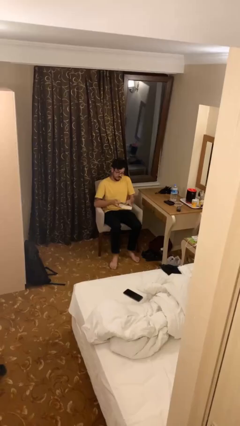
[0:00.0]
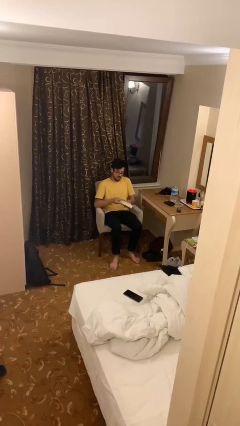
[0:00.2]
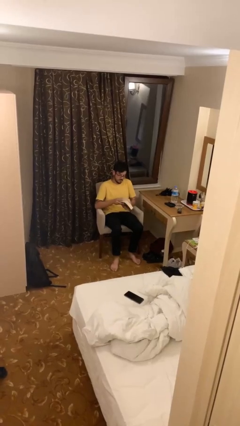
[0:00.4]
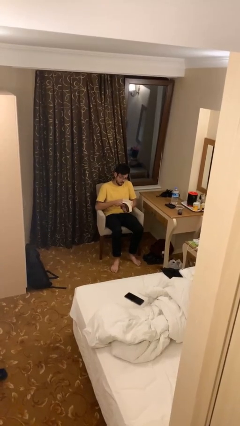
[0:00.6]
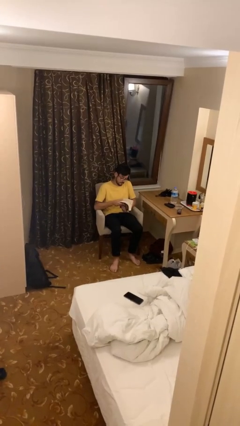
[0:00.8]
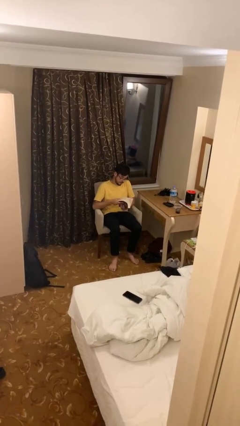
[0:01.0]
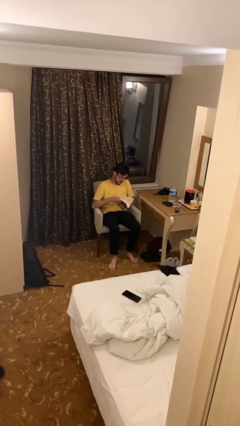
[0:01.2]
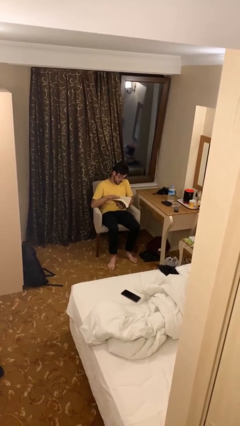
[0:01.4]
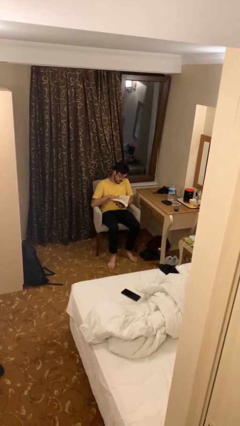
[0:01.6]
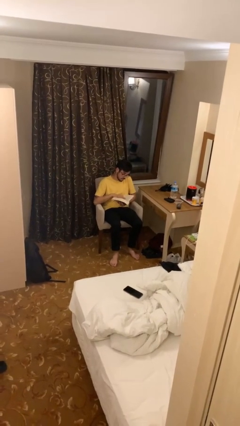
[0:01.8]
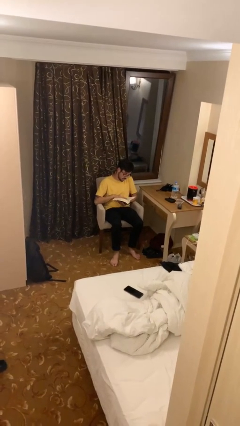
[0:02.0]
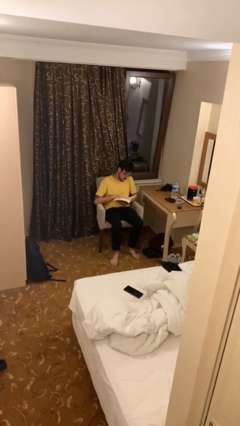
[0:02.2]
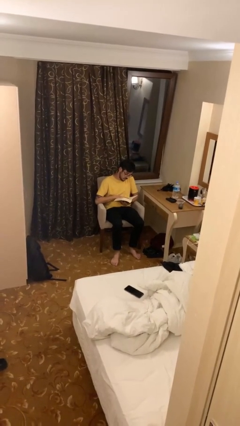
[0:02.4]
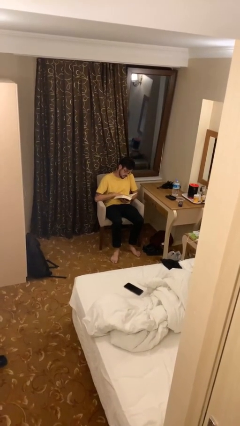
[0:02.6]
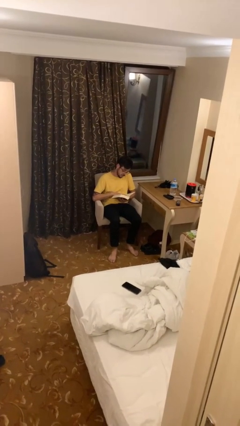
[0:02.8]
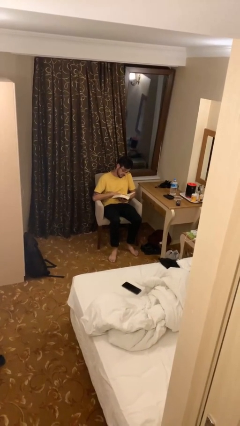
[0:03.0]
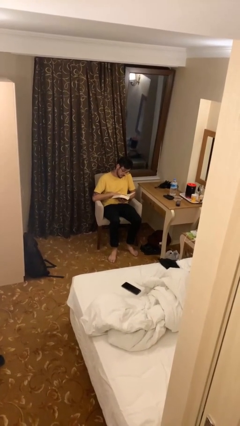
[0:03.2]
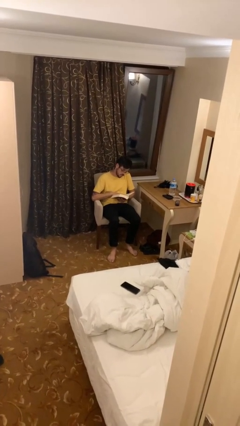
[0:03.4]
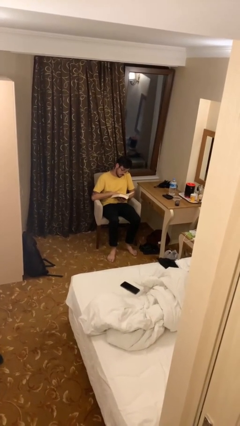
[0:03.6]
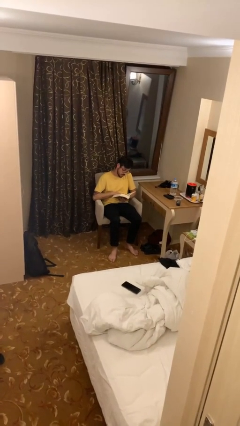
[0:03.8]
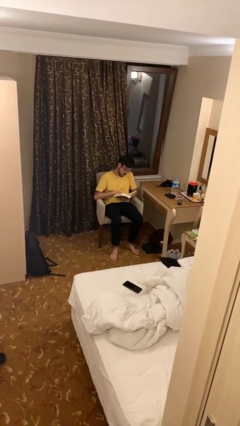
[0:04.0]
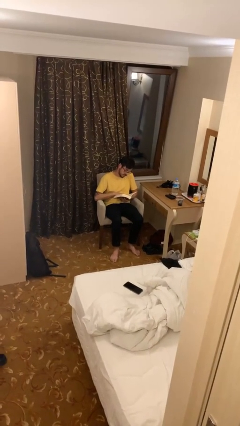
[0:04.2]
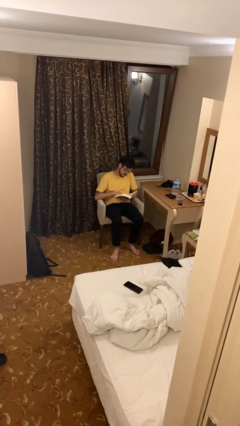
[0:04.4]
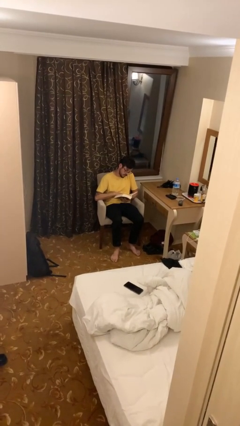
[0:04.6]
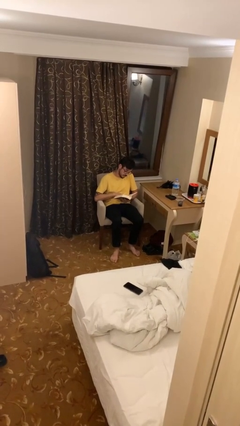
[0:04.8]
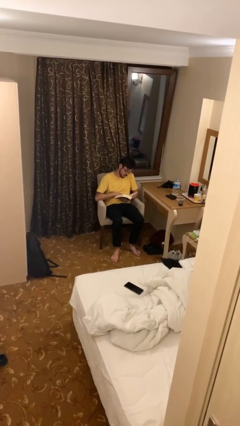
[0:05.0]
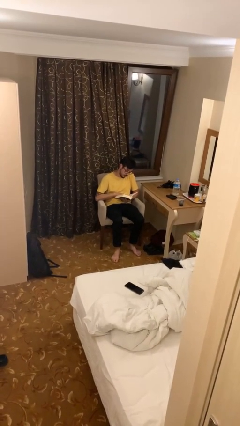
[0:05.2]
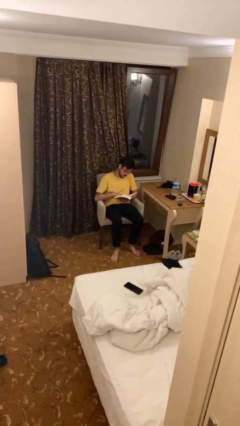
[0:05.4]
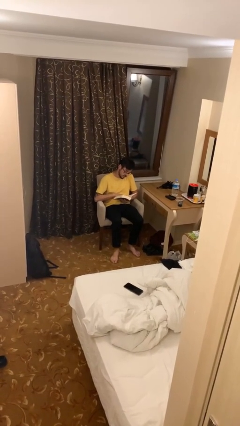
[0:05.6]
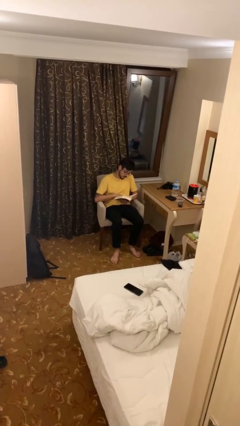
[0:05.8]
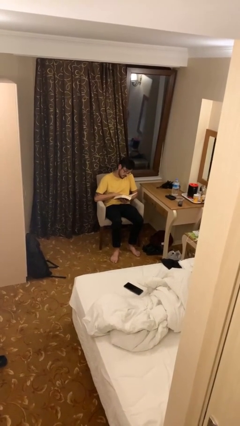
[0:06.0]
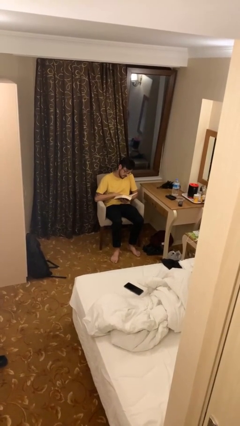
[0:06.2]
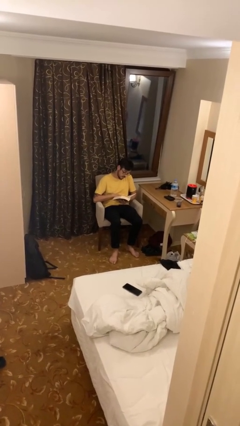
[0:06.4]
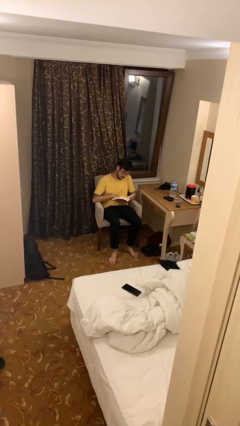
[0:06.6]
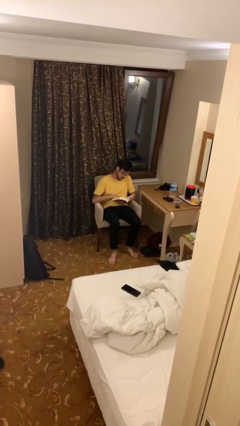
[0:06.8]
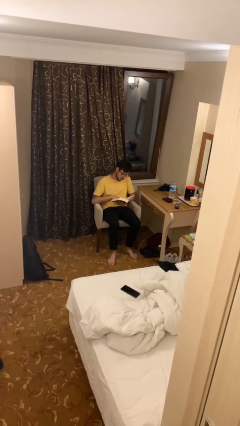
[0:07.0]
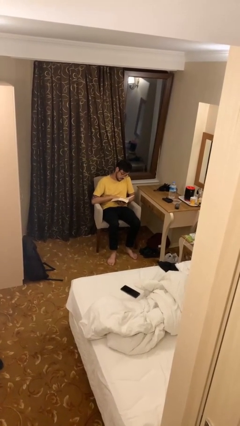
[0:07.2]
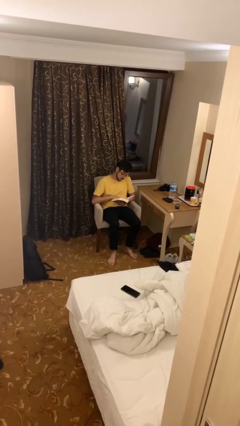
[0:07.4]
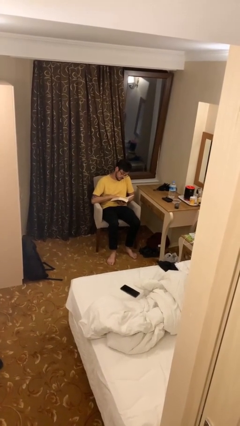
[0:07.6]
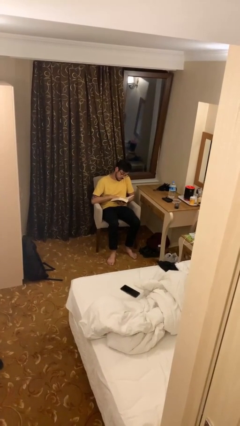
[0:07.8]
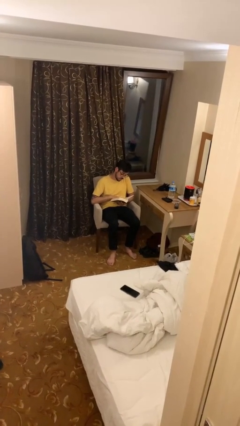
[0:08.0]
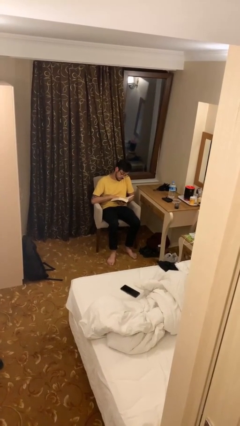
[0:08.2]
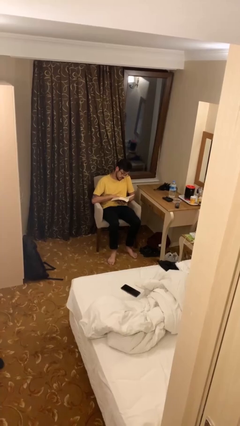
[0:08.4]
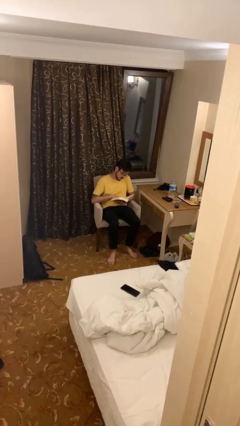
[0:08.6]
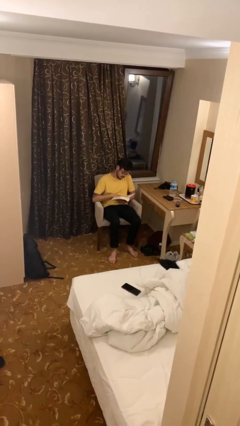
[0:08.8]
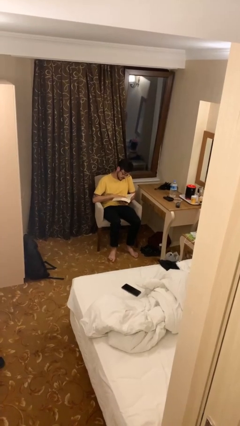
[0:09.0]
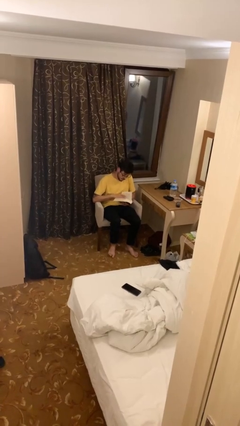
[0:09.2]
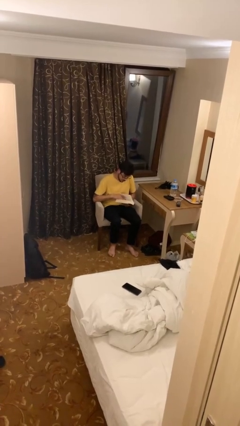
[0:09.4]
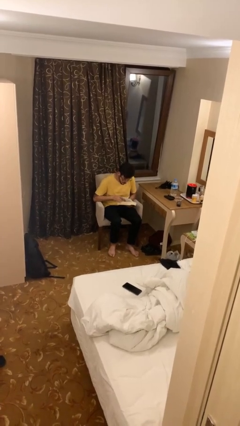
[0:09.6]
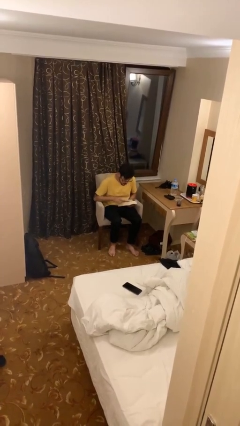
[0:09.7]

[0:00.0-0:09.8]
person reads document

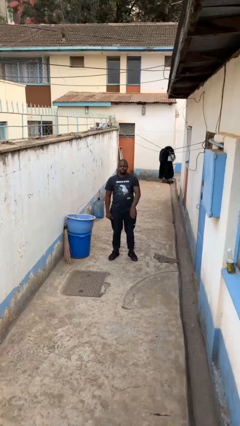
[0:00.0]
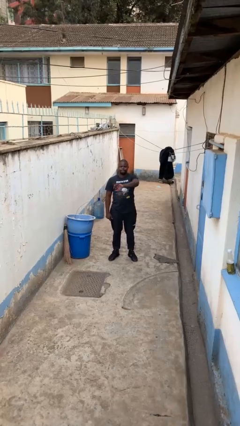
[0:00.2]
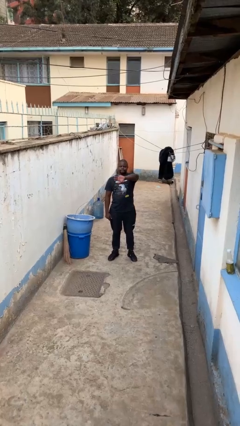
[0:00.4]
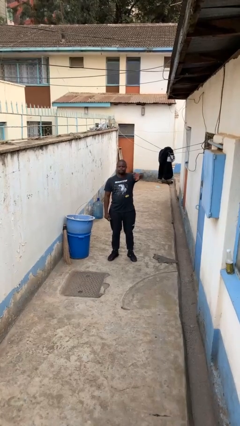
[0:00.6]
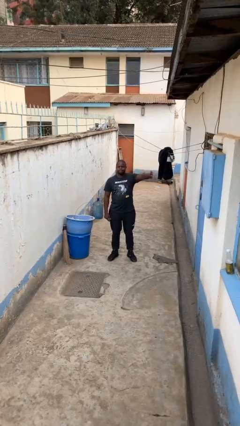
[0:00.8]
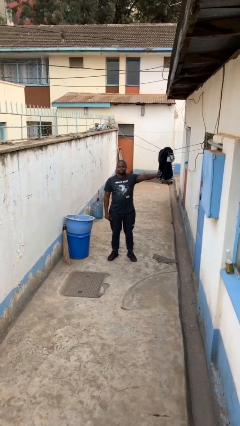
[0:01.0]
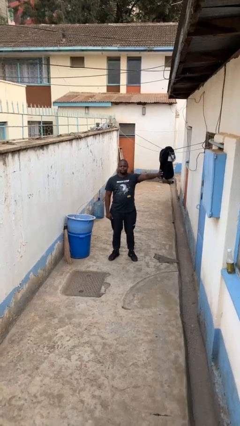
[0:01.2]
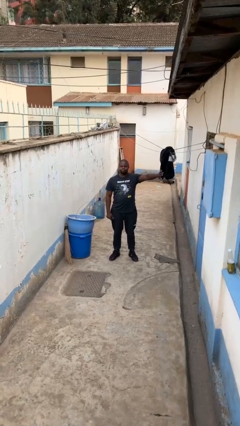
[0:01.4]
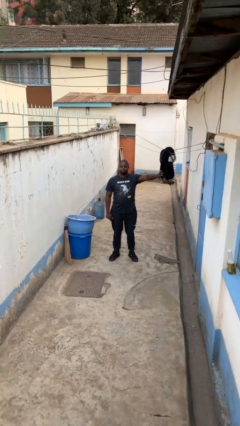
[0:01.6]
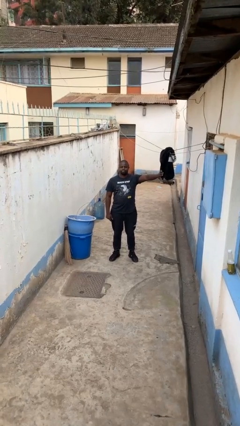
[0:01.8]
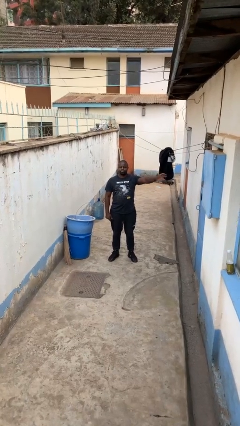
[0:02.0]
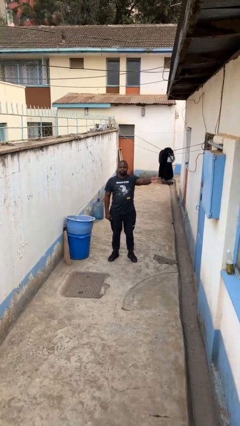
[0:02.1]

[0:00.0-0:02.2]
person gestures swipe left

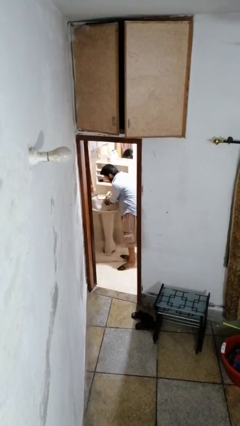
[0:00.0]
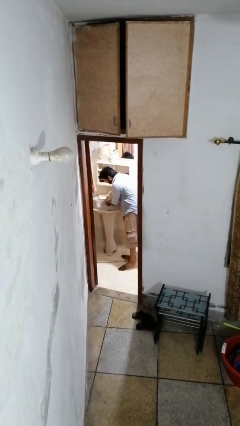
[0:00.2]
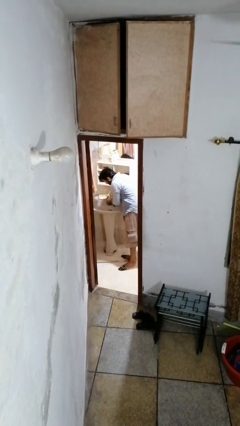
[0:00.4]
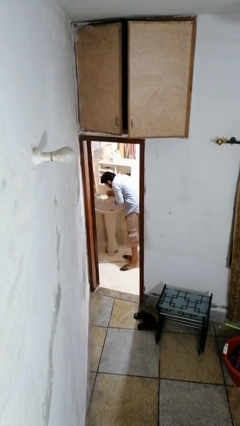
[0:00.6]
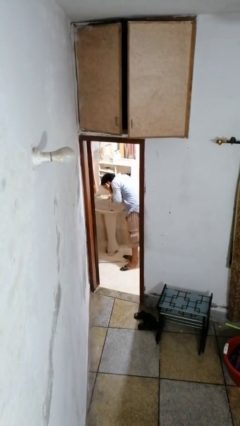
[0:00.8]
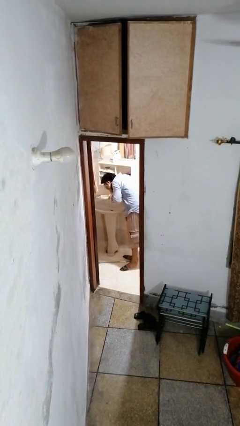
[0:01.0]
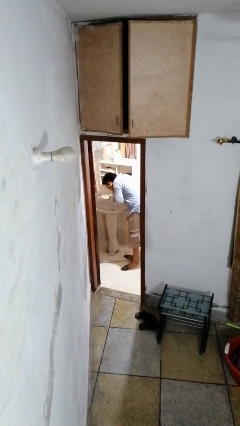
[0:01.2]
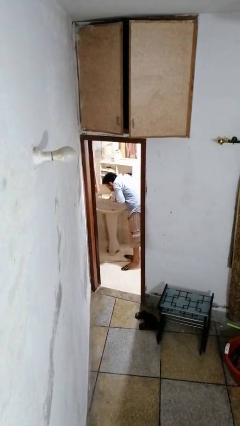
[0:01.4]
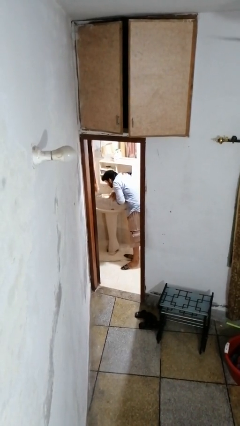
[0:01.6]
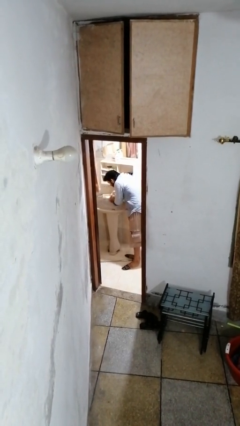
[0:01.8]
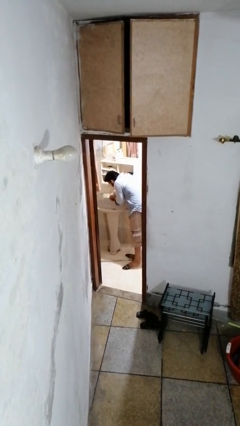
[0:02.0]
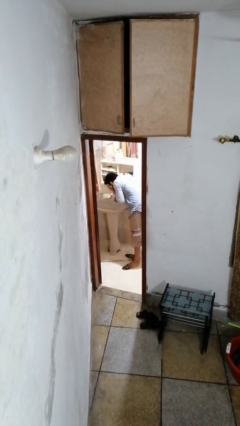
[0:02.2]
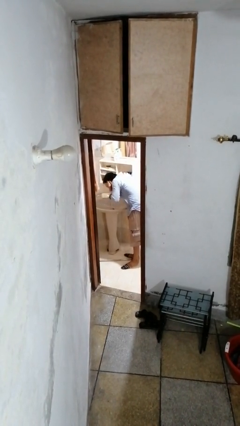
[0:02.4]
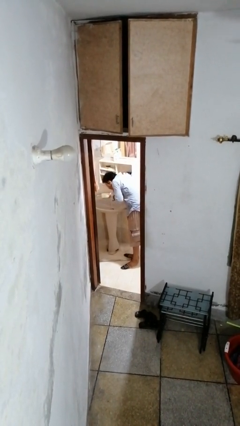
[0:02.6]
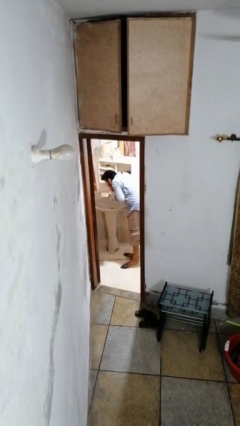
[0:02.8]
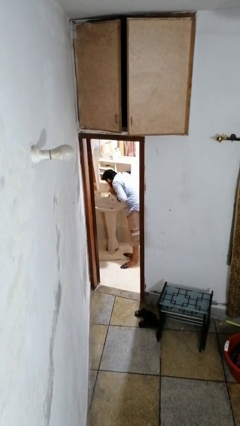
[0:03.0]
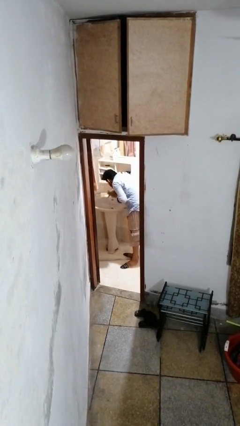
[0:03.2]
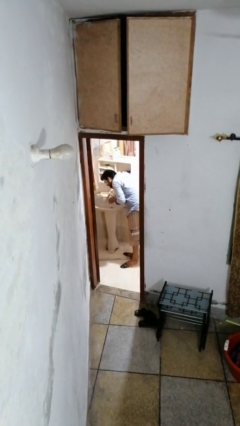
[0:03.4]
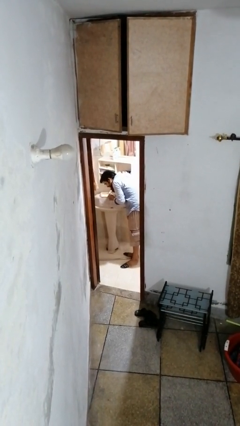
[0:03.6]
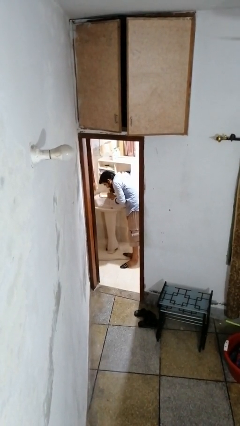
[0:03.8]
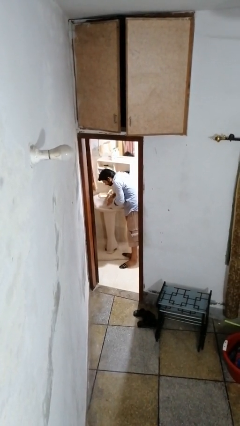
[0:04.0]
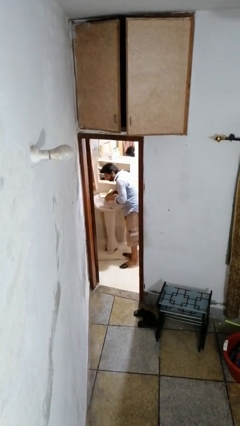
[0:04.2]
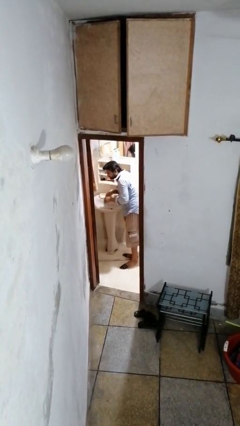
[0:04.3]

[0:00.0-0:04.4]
person washes face

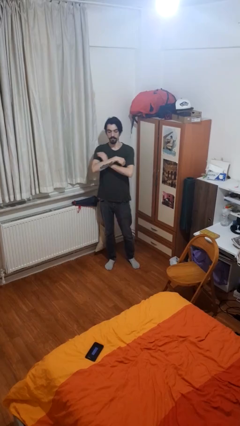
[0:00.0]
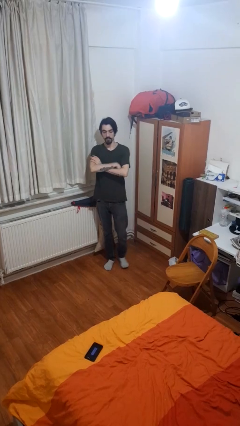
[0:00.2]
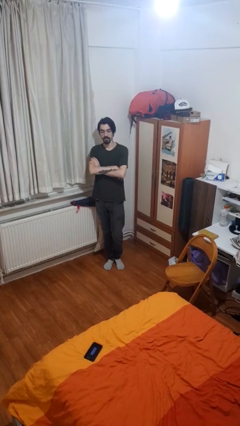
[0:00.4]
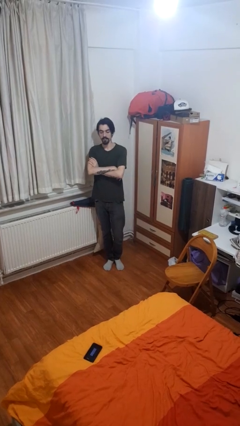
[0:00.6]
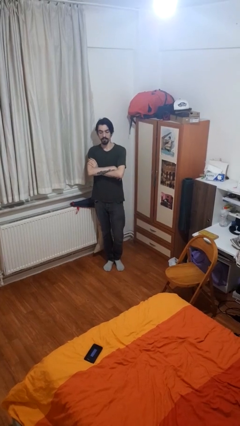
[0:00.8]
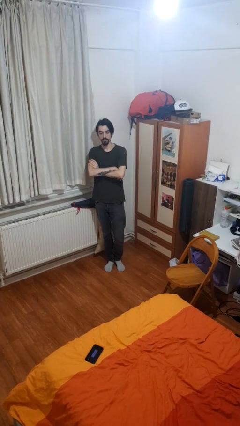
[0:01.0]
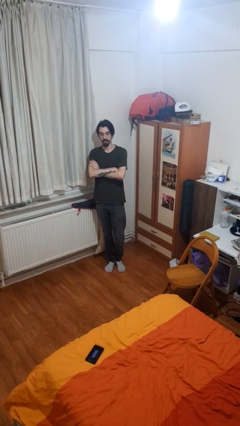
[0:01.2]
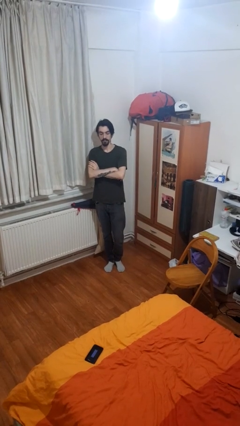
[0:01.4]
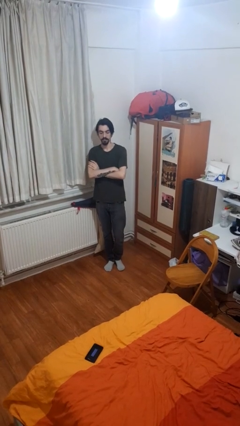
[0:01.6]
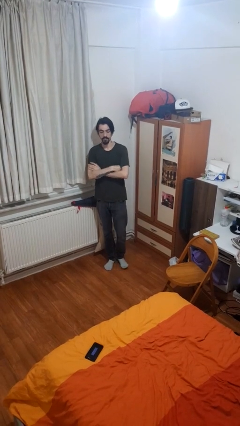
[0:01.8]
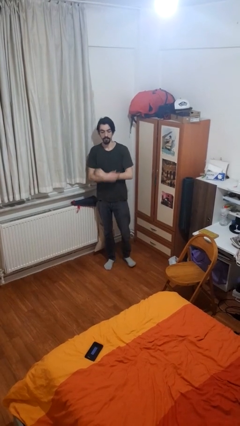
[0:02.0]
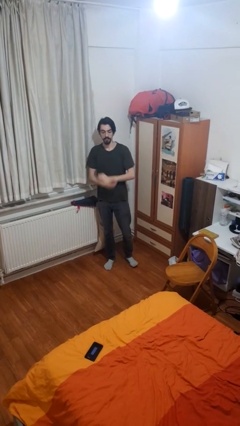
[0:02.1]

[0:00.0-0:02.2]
person crosses arms
